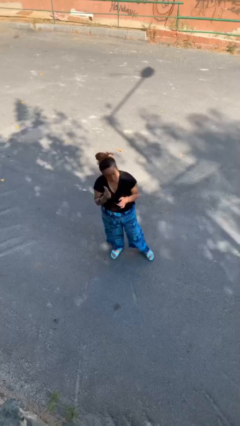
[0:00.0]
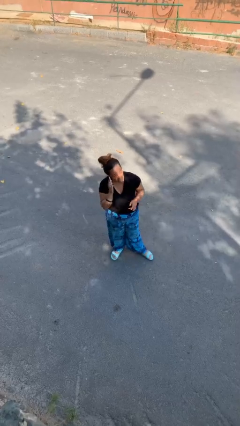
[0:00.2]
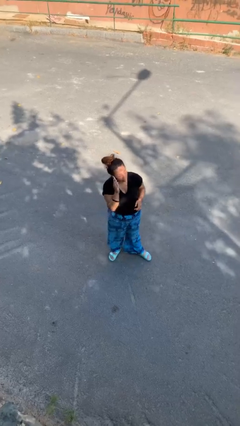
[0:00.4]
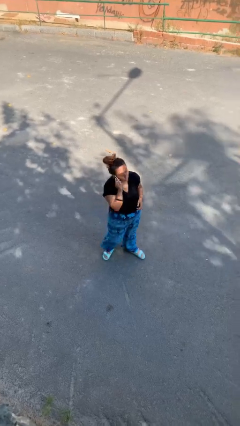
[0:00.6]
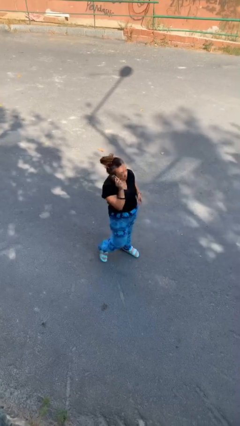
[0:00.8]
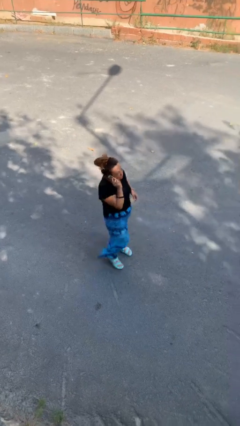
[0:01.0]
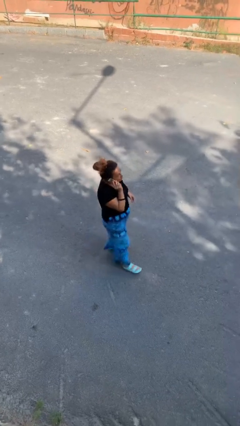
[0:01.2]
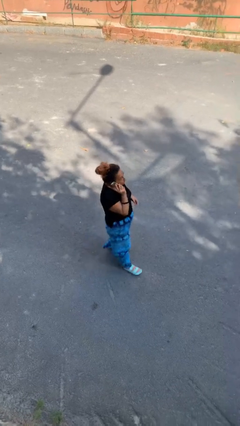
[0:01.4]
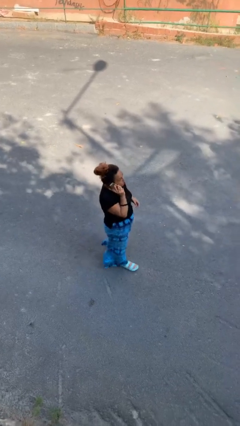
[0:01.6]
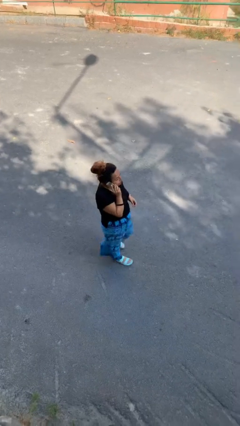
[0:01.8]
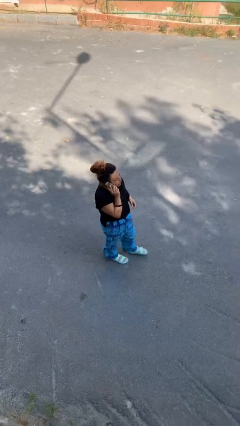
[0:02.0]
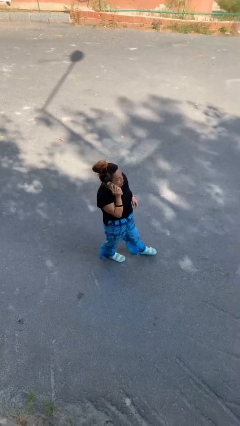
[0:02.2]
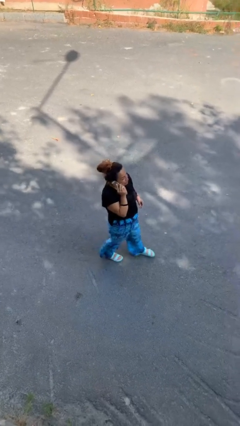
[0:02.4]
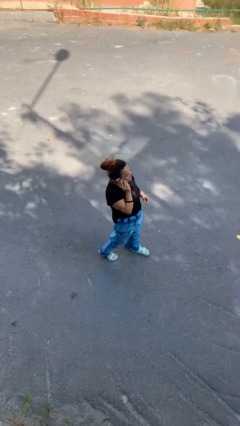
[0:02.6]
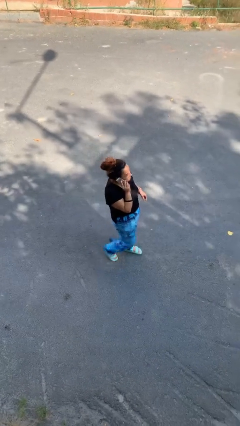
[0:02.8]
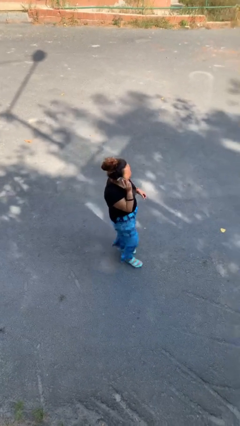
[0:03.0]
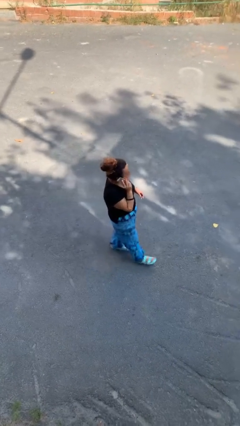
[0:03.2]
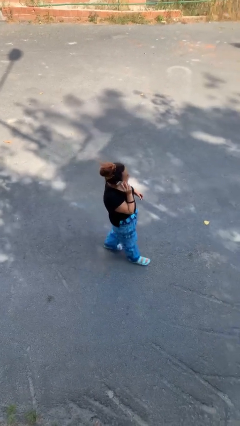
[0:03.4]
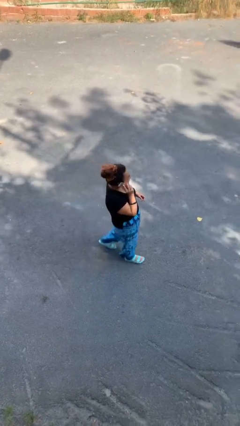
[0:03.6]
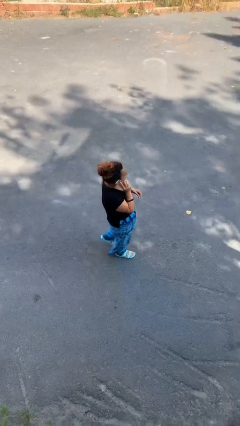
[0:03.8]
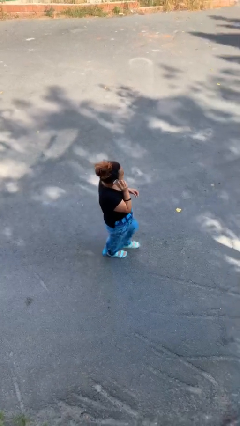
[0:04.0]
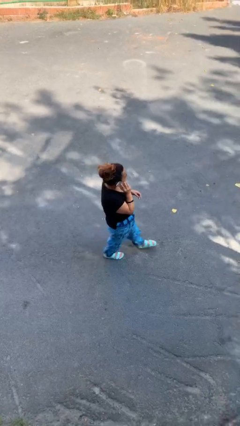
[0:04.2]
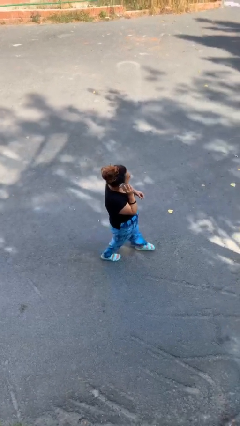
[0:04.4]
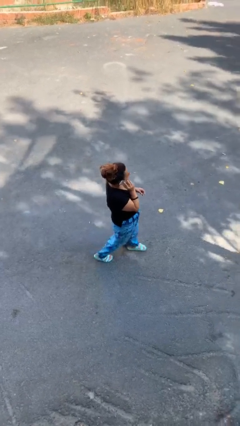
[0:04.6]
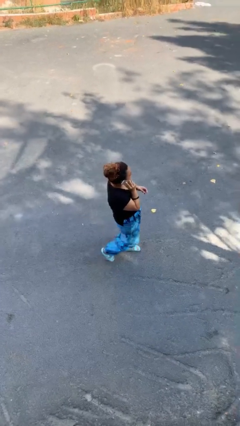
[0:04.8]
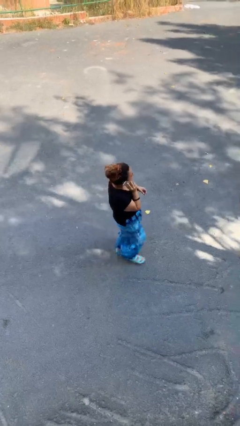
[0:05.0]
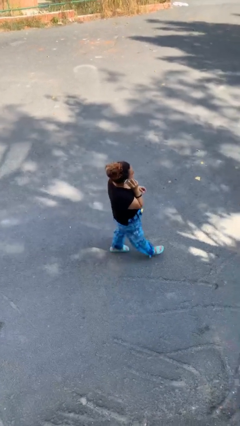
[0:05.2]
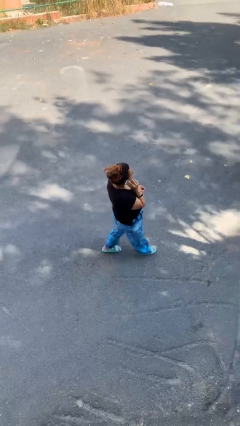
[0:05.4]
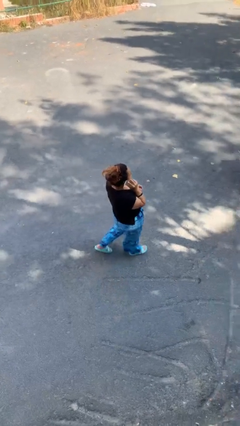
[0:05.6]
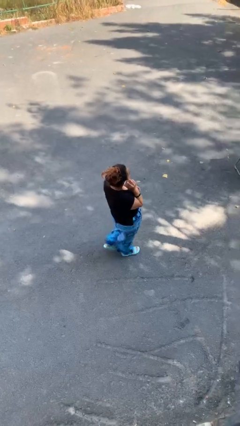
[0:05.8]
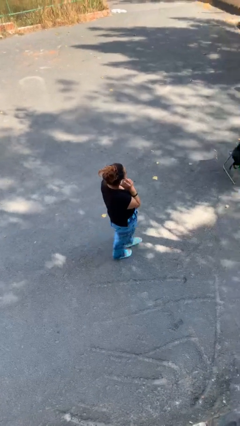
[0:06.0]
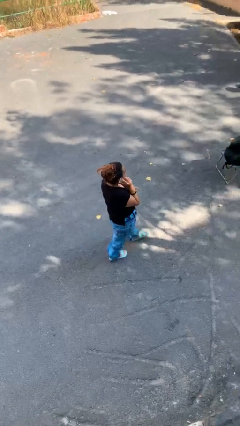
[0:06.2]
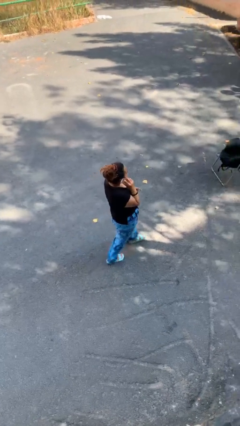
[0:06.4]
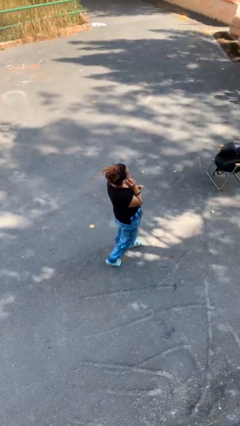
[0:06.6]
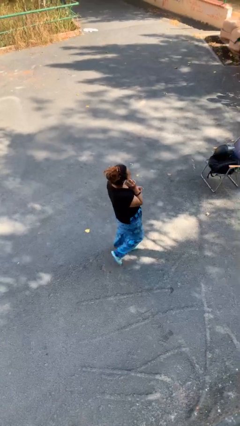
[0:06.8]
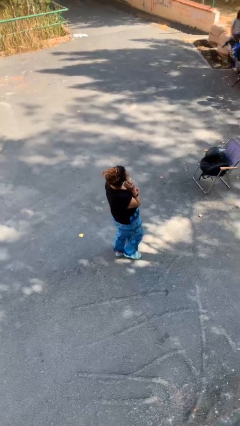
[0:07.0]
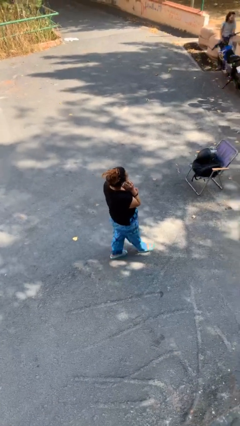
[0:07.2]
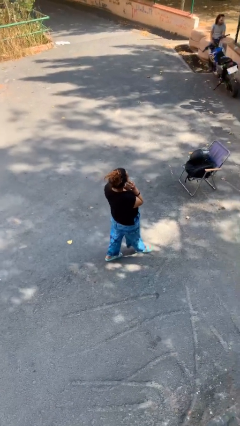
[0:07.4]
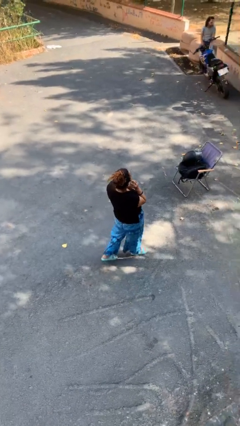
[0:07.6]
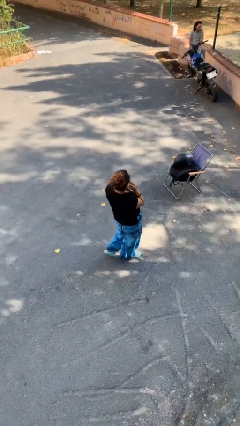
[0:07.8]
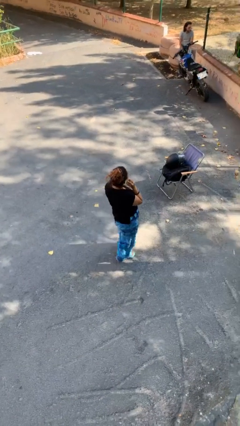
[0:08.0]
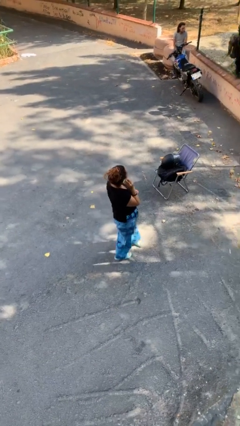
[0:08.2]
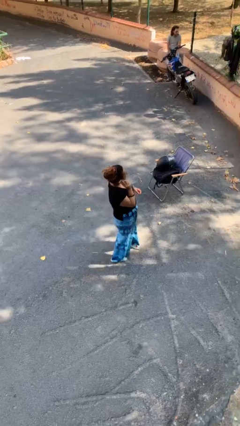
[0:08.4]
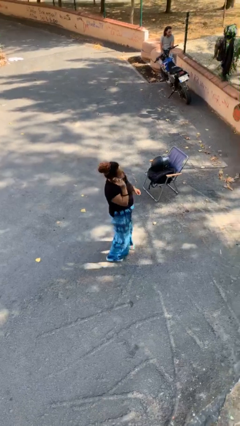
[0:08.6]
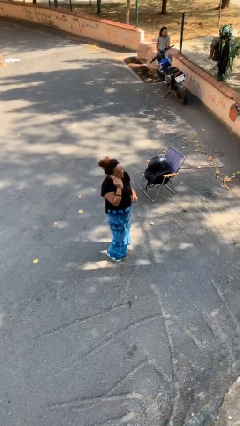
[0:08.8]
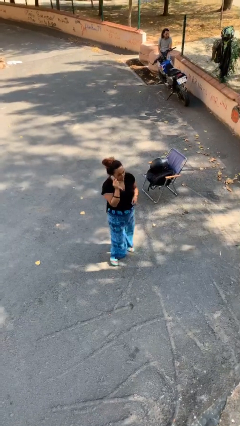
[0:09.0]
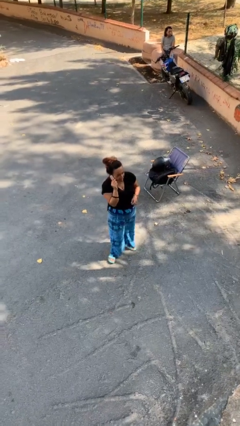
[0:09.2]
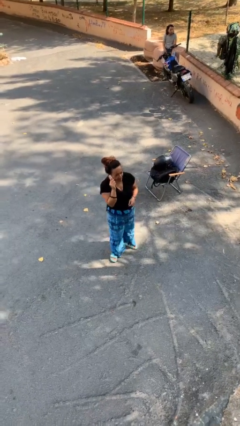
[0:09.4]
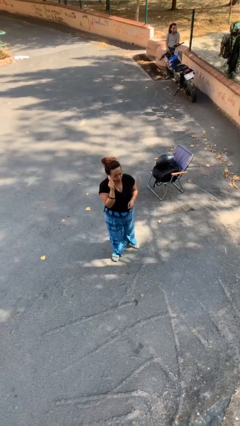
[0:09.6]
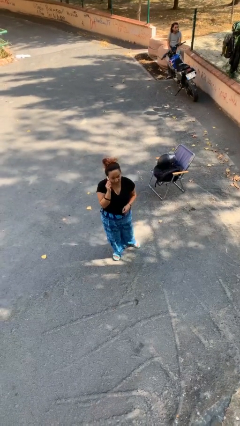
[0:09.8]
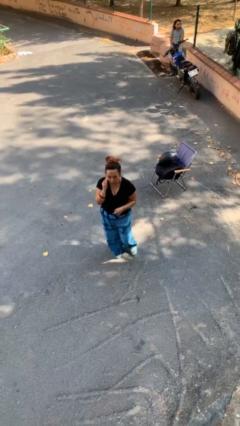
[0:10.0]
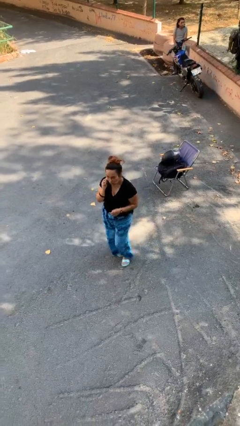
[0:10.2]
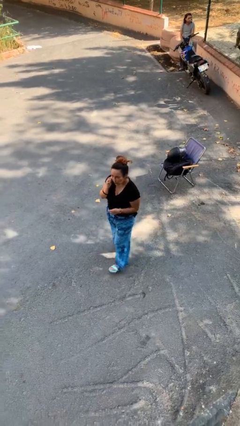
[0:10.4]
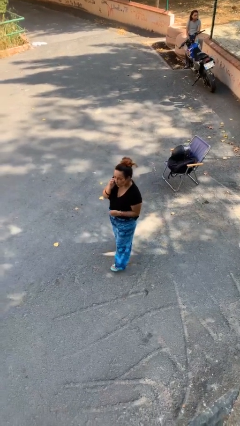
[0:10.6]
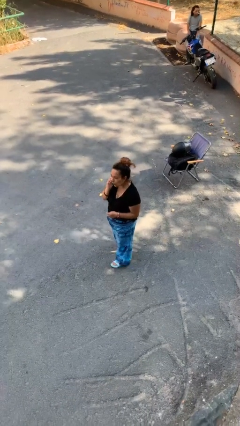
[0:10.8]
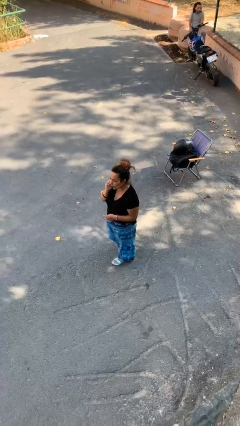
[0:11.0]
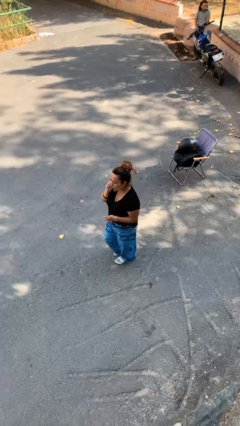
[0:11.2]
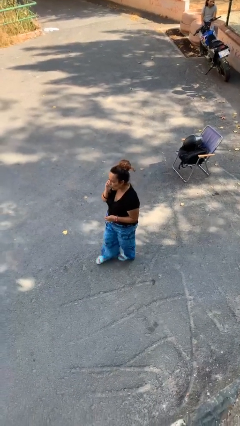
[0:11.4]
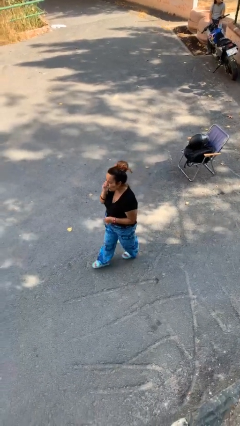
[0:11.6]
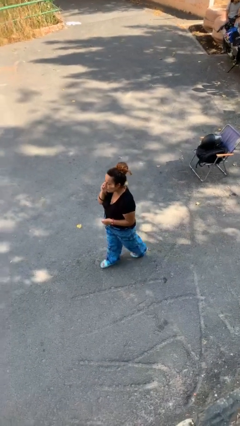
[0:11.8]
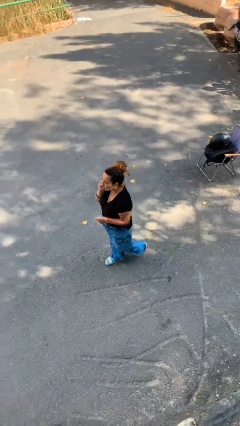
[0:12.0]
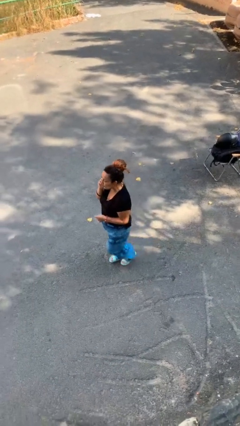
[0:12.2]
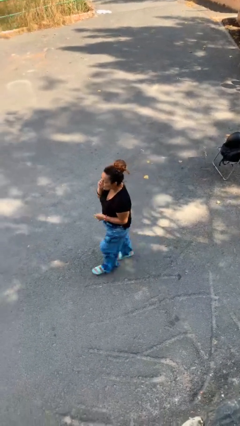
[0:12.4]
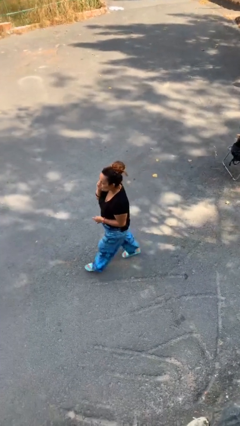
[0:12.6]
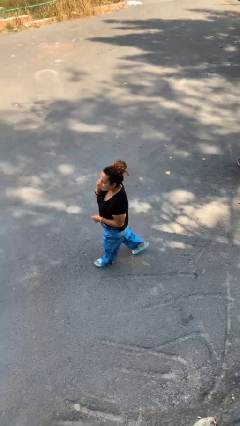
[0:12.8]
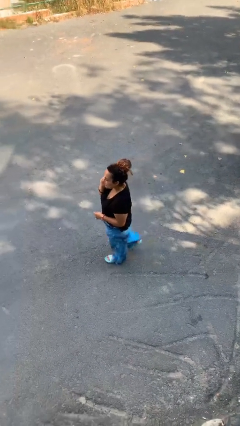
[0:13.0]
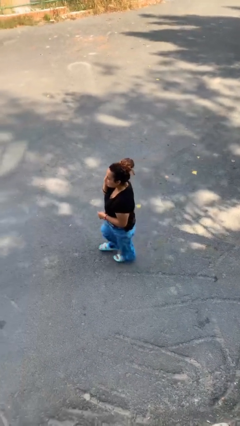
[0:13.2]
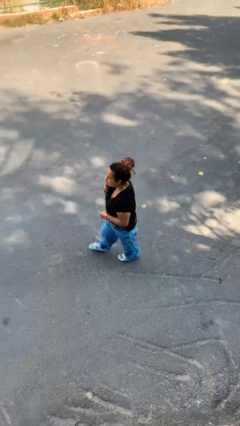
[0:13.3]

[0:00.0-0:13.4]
person talks on phone

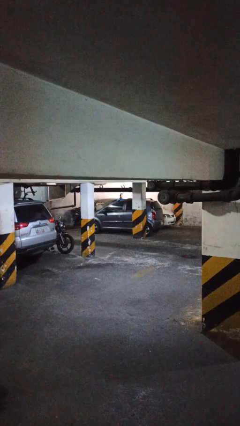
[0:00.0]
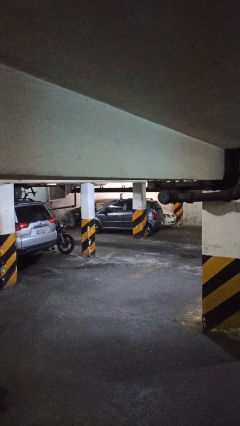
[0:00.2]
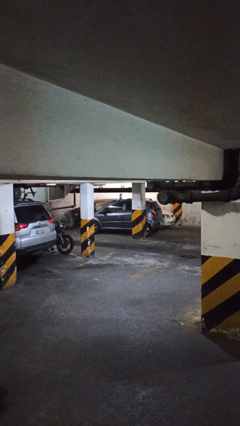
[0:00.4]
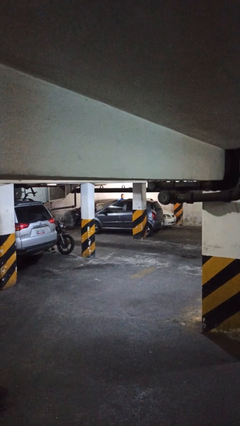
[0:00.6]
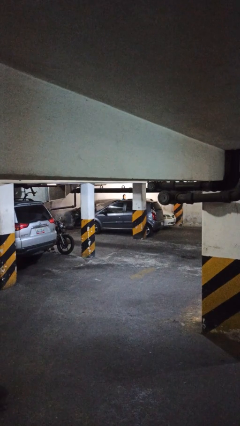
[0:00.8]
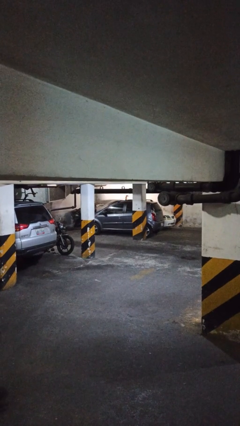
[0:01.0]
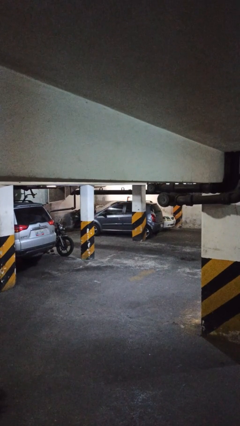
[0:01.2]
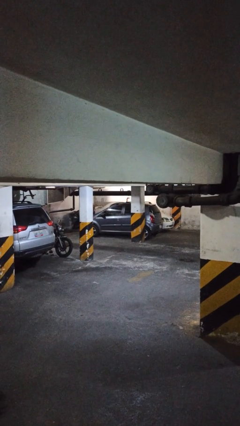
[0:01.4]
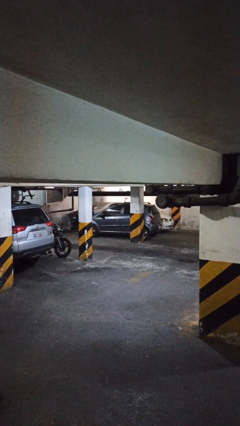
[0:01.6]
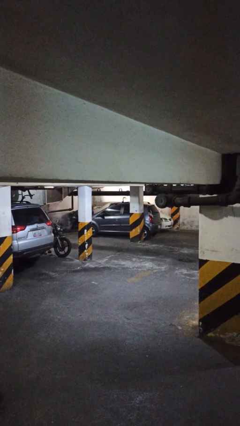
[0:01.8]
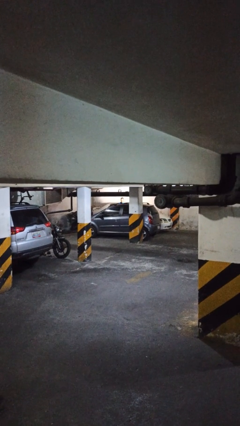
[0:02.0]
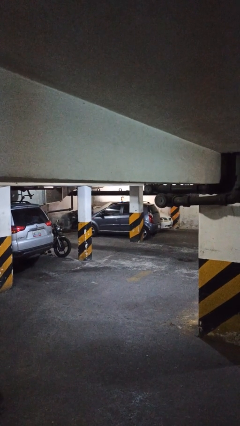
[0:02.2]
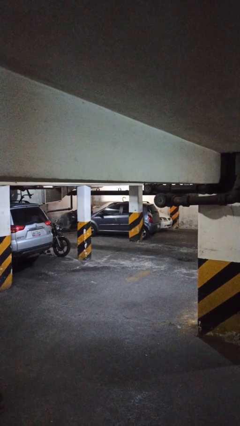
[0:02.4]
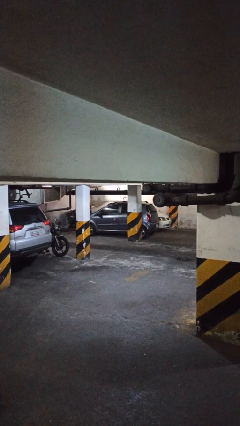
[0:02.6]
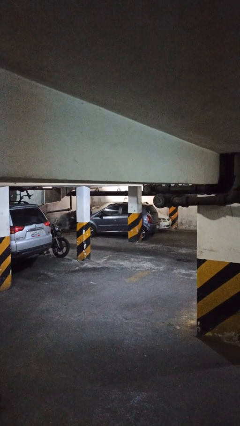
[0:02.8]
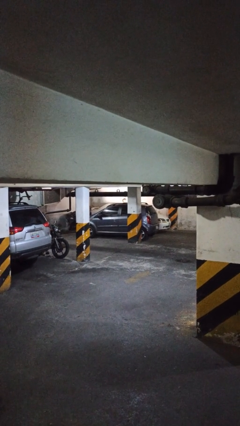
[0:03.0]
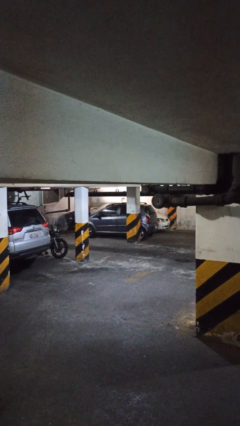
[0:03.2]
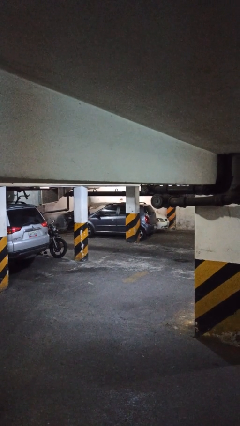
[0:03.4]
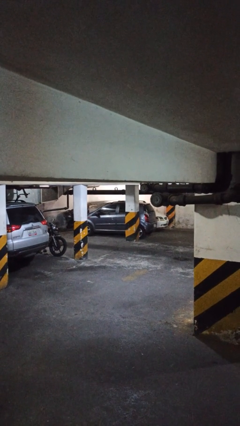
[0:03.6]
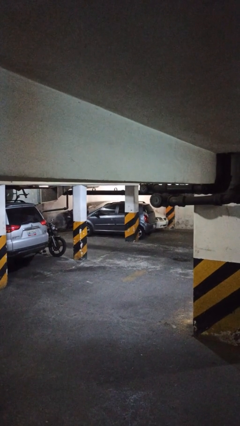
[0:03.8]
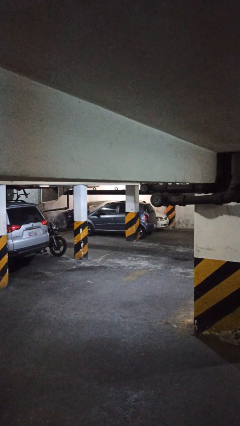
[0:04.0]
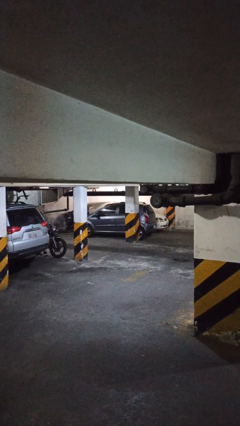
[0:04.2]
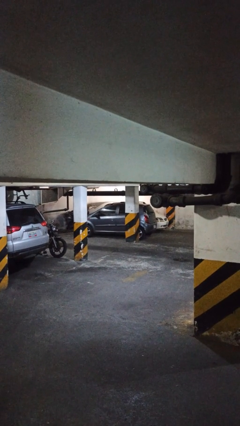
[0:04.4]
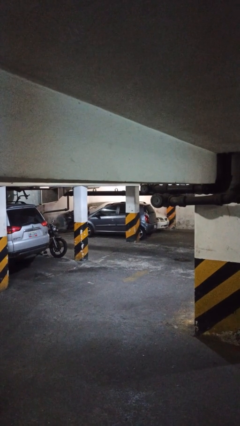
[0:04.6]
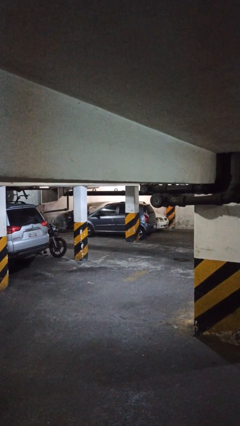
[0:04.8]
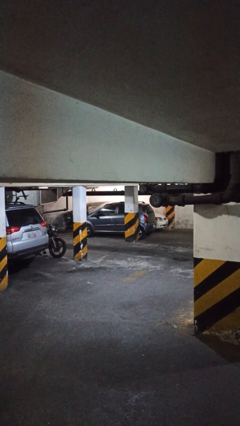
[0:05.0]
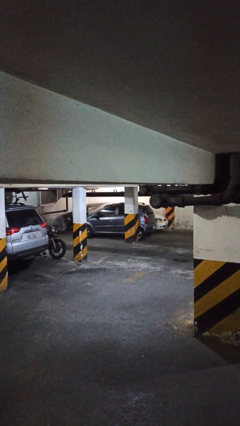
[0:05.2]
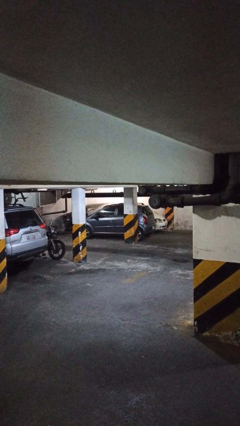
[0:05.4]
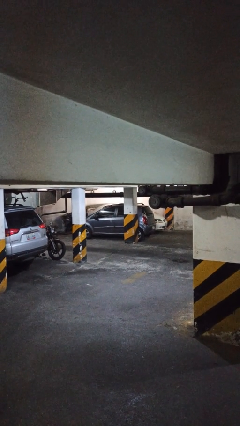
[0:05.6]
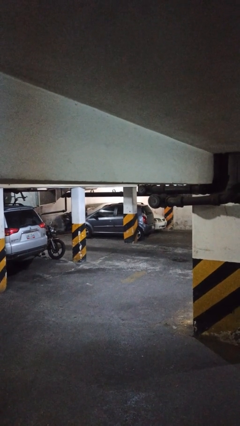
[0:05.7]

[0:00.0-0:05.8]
car picks up person
